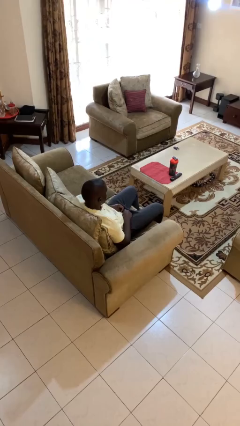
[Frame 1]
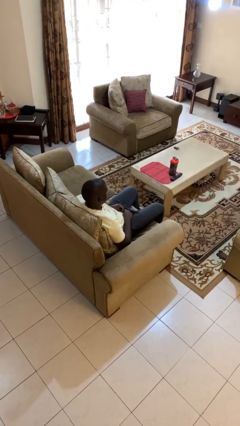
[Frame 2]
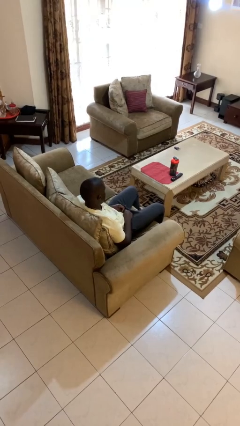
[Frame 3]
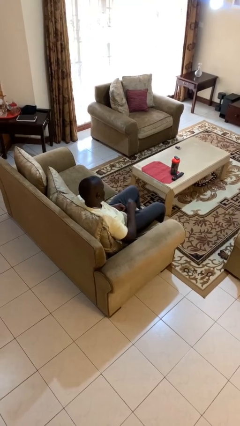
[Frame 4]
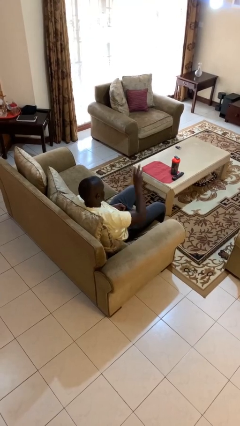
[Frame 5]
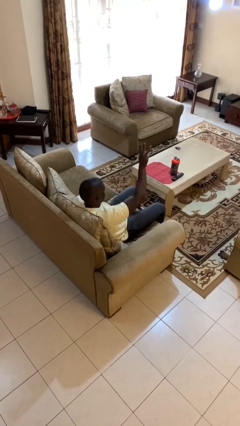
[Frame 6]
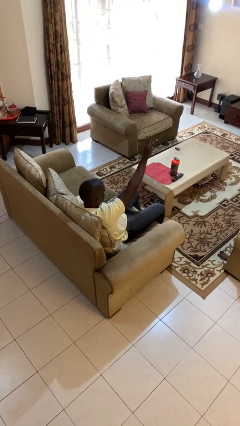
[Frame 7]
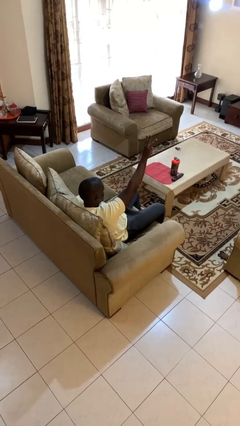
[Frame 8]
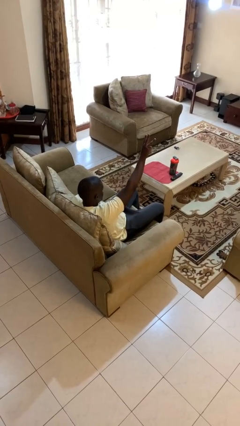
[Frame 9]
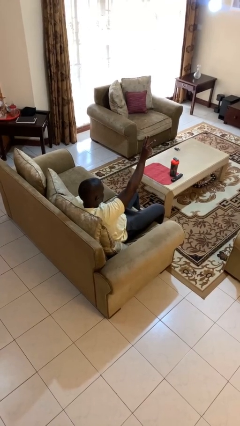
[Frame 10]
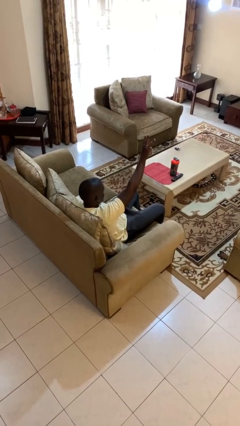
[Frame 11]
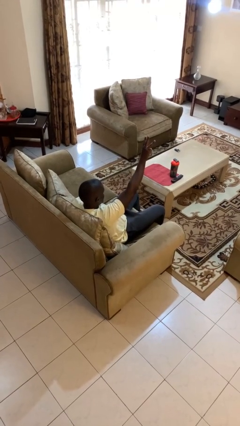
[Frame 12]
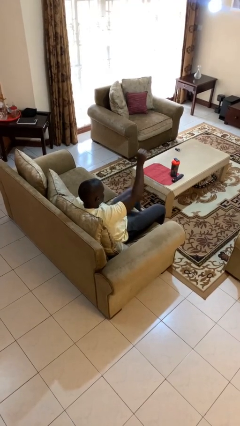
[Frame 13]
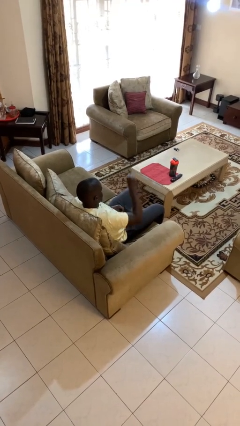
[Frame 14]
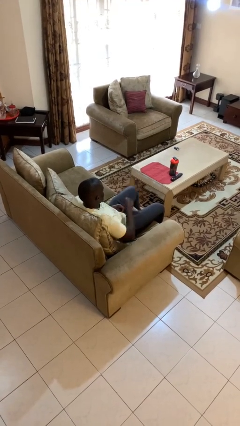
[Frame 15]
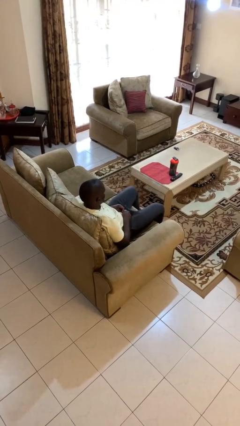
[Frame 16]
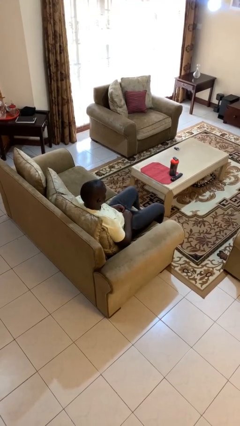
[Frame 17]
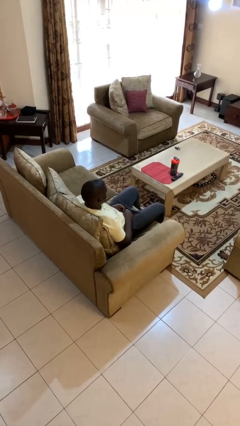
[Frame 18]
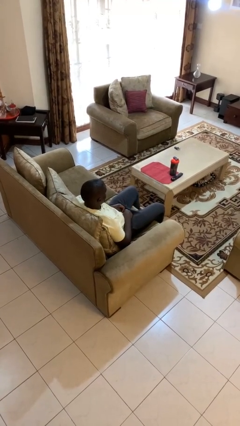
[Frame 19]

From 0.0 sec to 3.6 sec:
person gestures number three

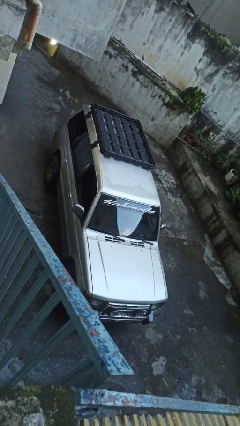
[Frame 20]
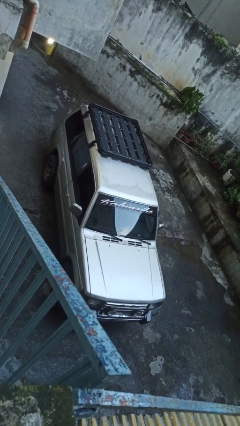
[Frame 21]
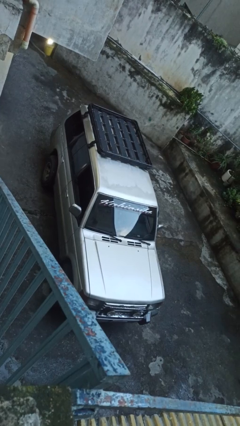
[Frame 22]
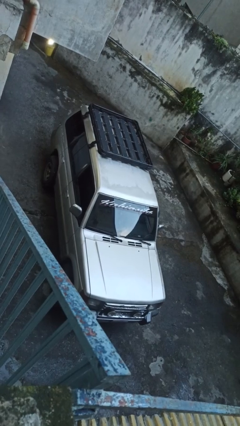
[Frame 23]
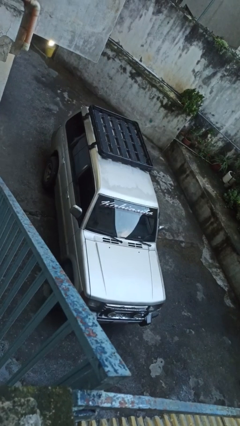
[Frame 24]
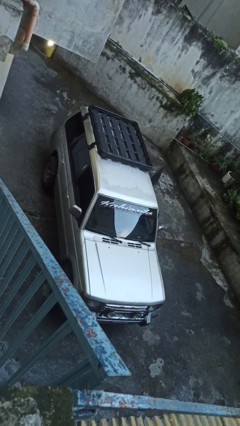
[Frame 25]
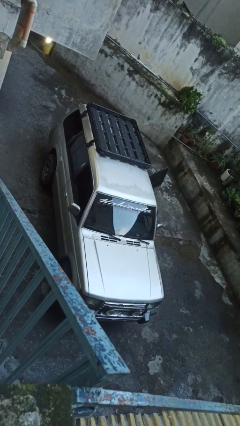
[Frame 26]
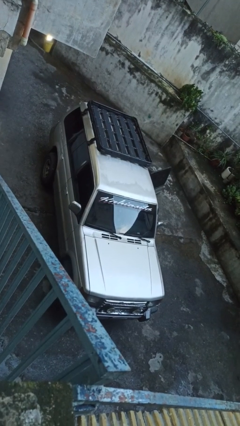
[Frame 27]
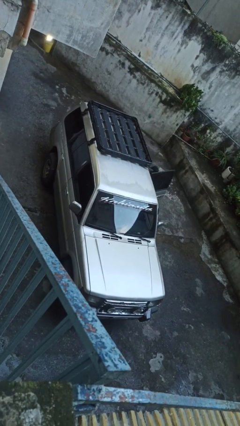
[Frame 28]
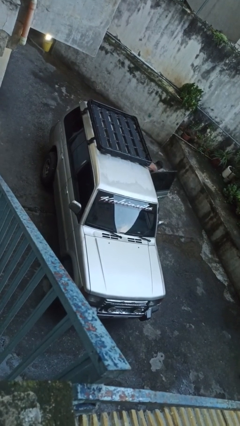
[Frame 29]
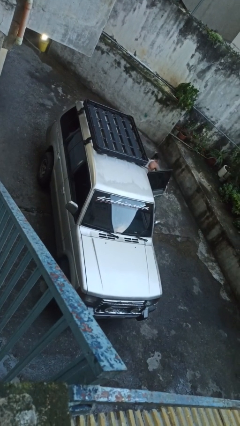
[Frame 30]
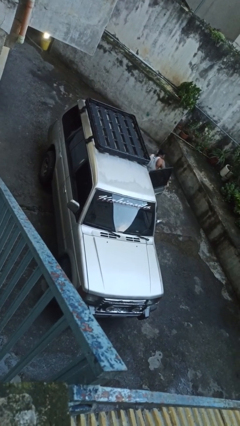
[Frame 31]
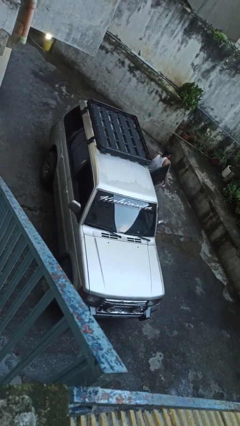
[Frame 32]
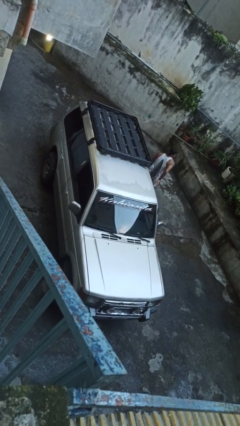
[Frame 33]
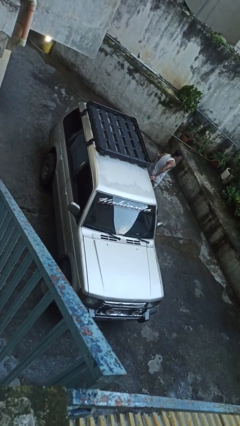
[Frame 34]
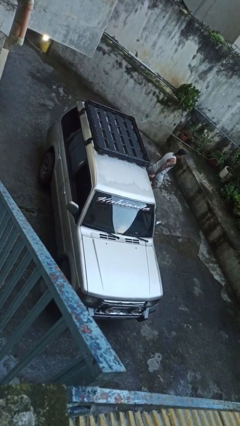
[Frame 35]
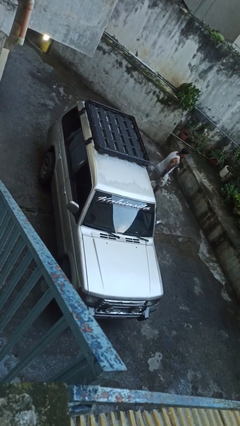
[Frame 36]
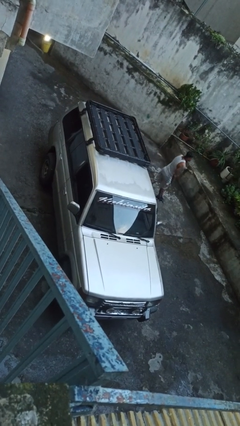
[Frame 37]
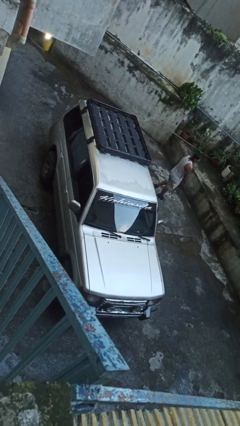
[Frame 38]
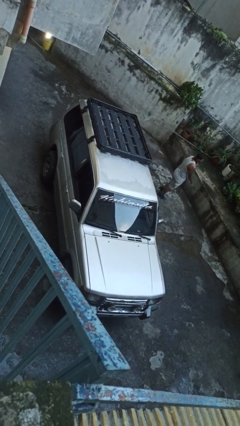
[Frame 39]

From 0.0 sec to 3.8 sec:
car drops off person

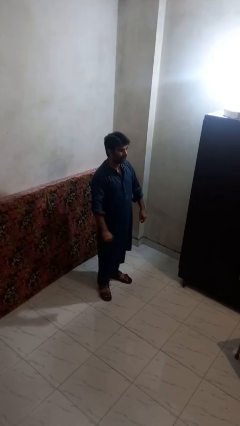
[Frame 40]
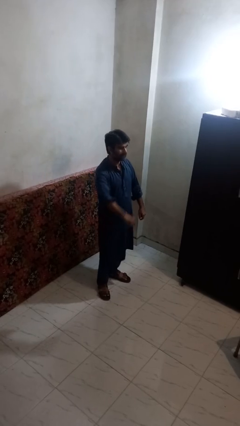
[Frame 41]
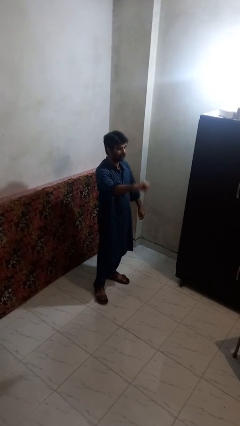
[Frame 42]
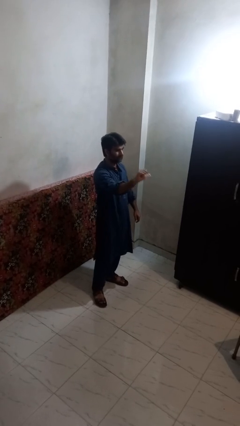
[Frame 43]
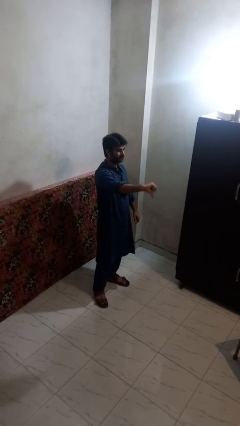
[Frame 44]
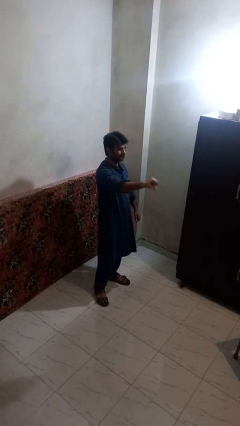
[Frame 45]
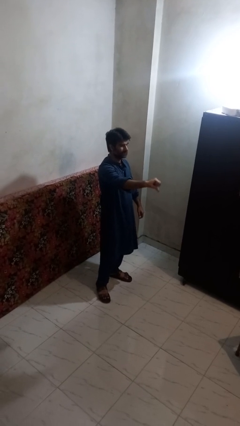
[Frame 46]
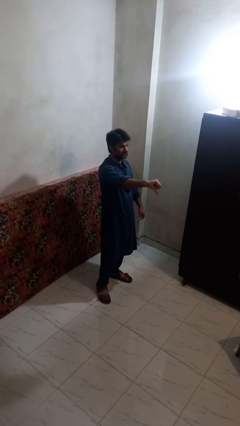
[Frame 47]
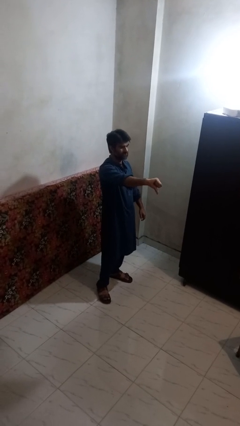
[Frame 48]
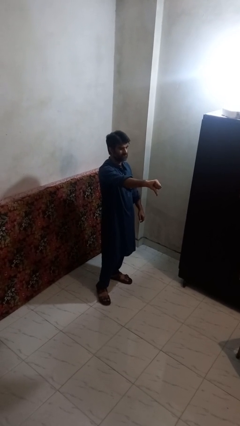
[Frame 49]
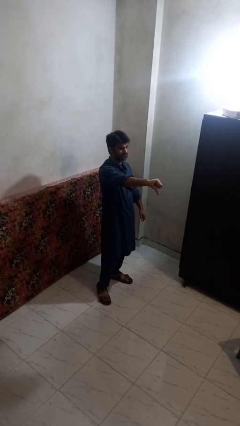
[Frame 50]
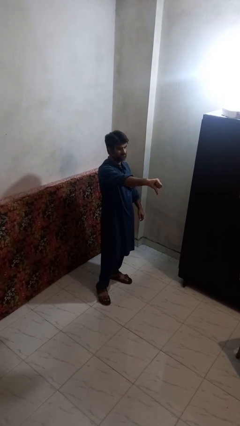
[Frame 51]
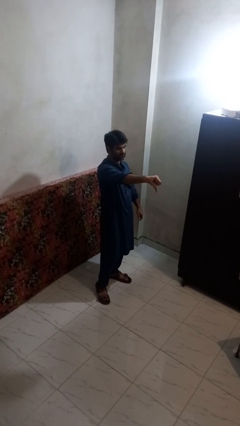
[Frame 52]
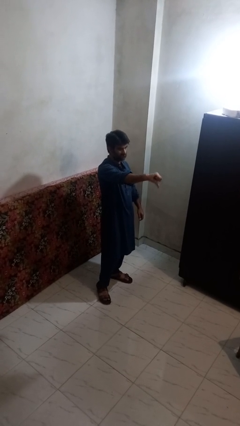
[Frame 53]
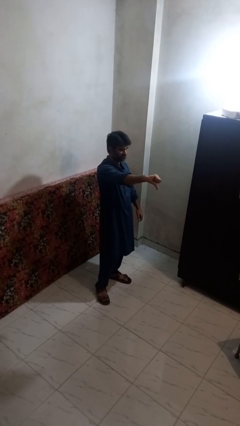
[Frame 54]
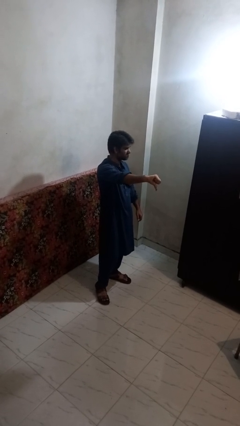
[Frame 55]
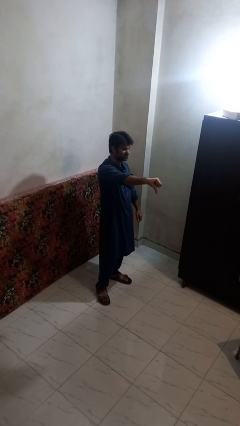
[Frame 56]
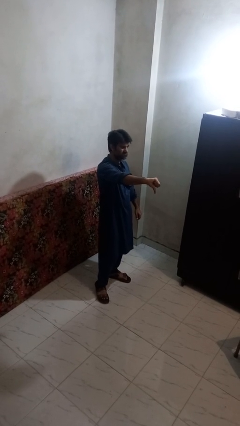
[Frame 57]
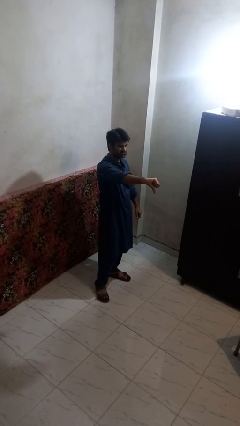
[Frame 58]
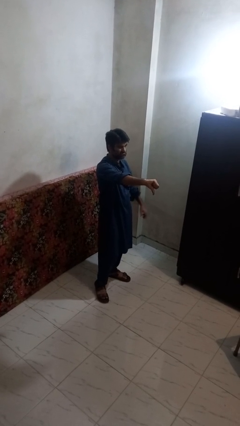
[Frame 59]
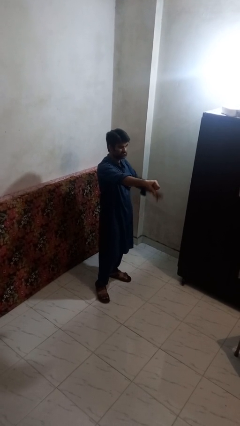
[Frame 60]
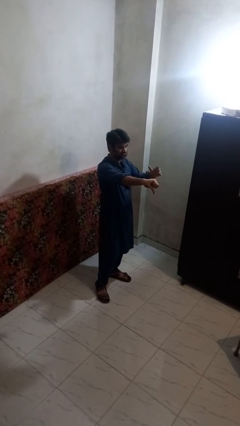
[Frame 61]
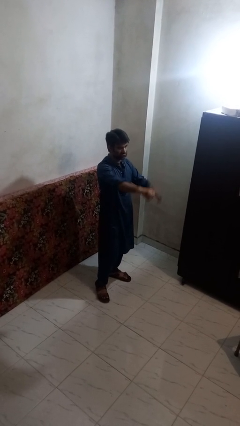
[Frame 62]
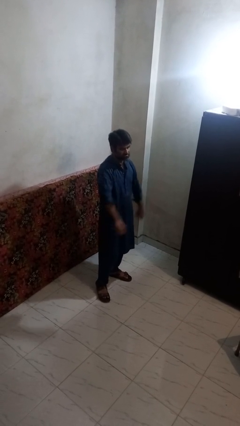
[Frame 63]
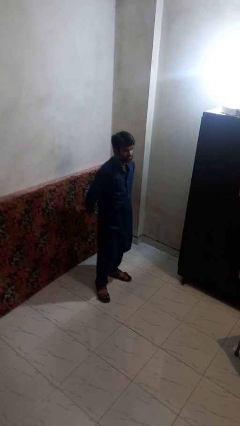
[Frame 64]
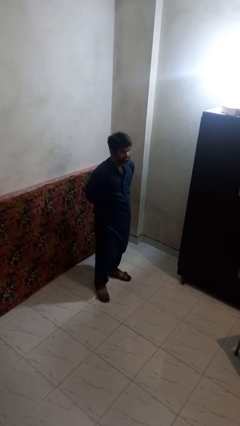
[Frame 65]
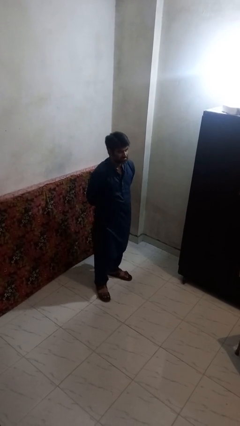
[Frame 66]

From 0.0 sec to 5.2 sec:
person gestures thumbs down

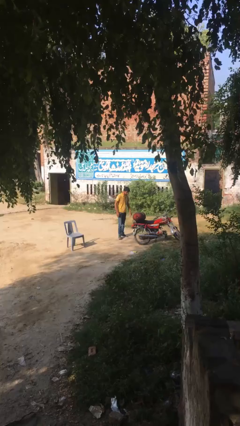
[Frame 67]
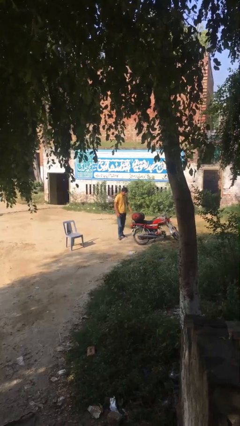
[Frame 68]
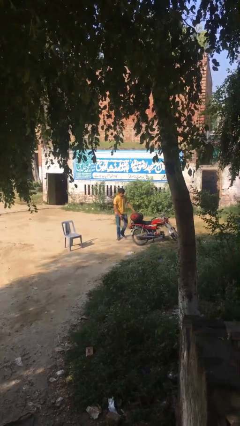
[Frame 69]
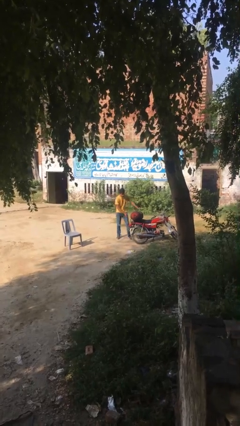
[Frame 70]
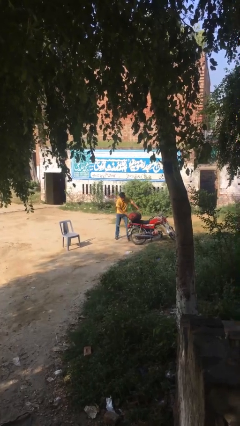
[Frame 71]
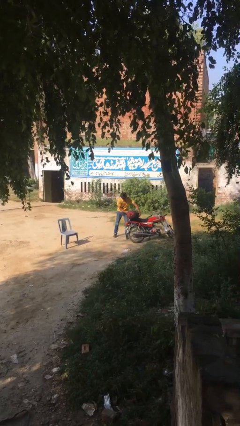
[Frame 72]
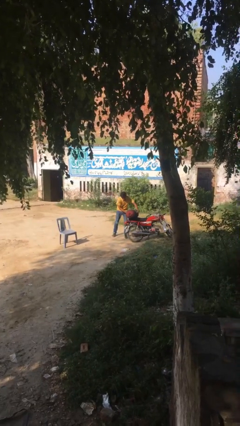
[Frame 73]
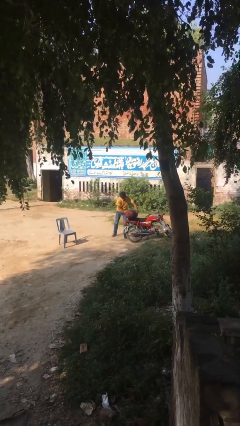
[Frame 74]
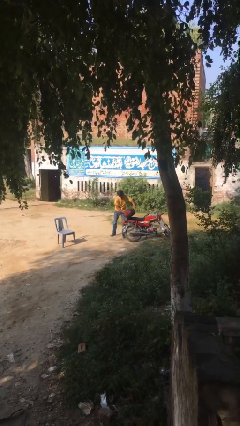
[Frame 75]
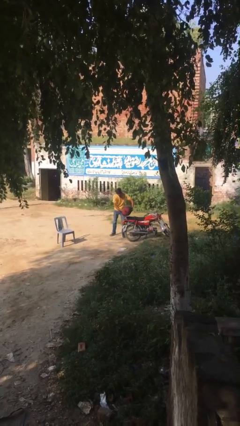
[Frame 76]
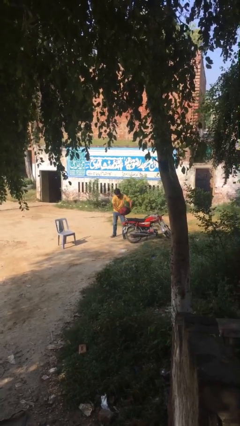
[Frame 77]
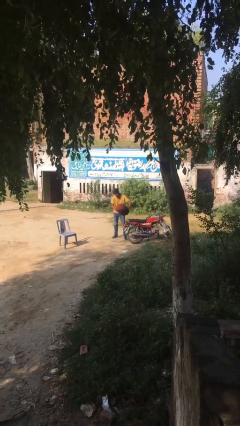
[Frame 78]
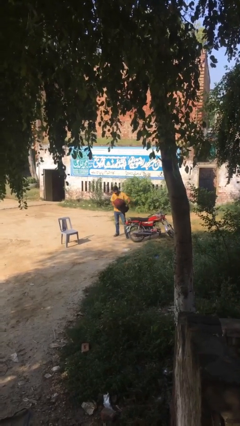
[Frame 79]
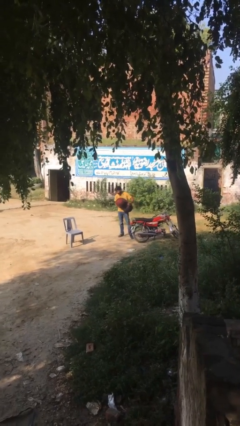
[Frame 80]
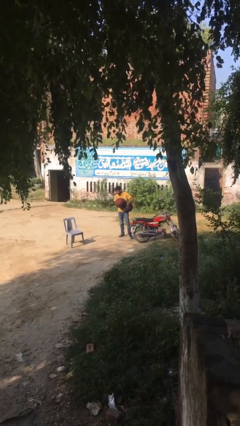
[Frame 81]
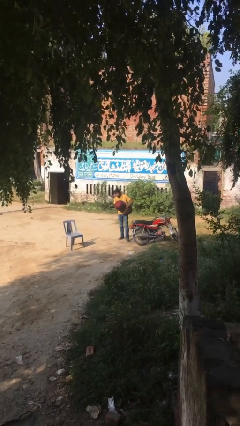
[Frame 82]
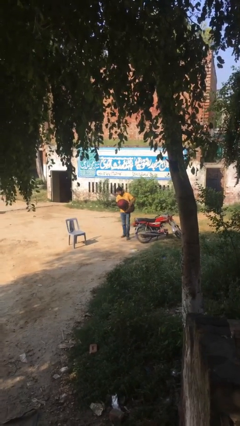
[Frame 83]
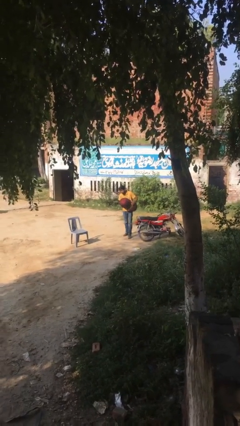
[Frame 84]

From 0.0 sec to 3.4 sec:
person picks up object from floor

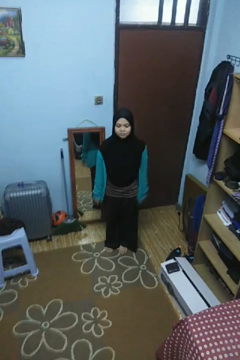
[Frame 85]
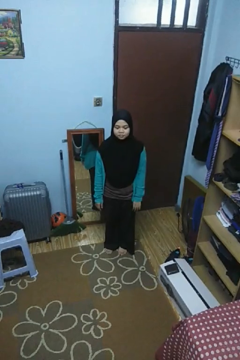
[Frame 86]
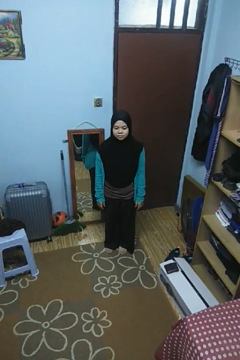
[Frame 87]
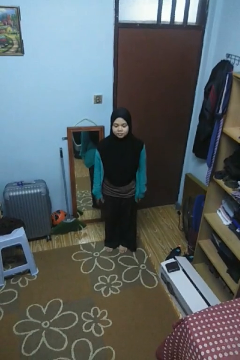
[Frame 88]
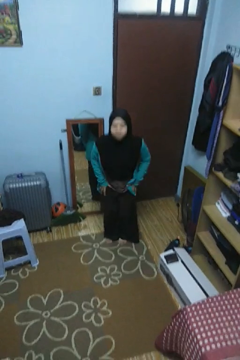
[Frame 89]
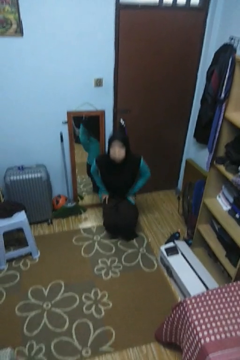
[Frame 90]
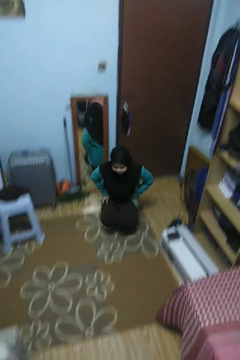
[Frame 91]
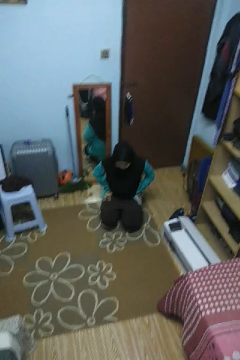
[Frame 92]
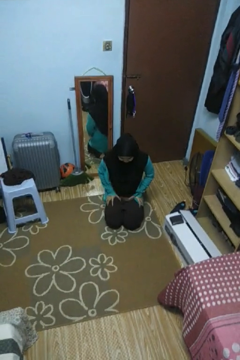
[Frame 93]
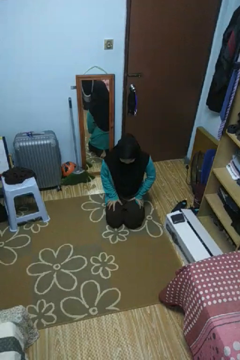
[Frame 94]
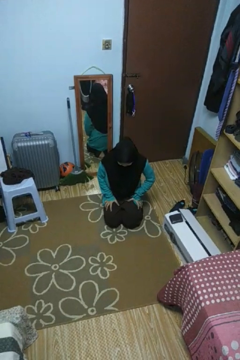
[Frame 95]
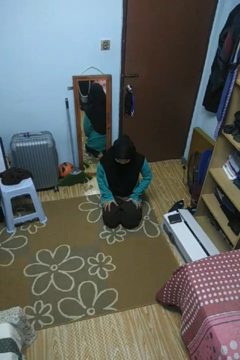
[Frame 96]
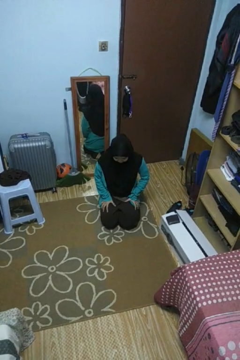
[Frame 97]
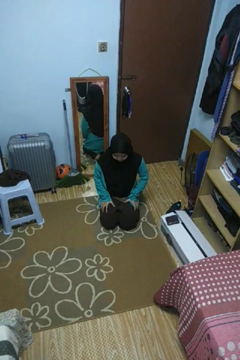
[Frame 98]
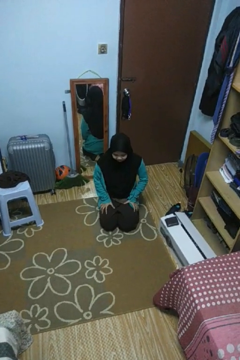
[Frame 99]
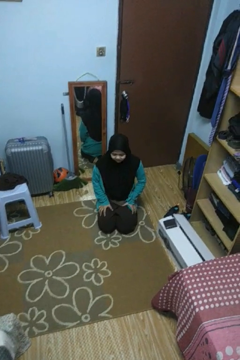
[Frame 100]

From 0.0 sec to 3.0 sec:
person kneels
